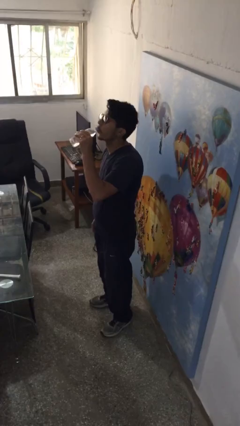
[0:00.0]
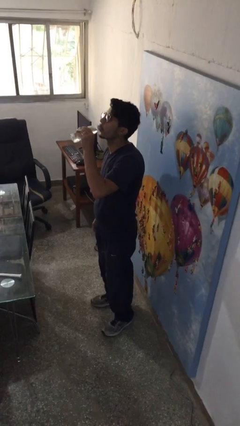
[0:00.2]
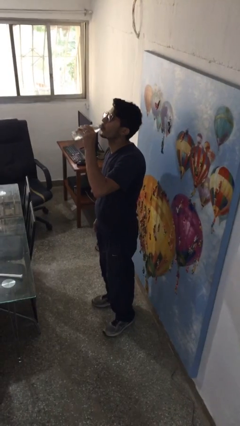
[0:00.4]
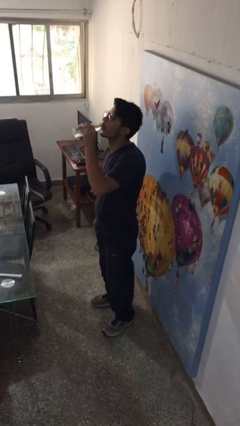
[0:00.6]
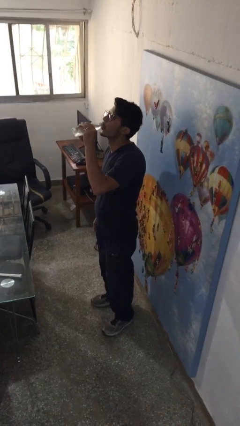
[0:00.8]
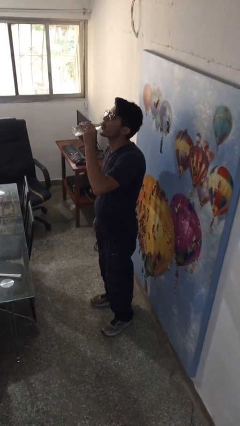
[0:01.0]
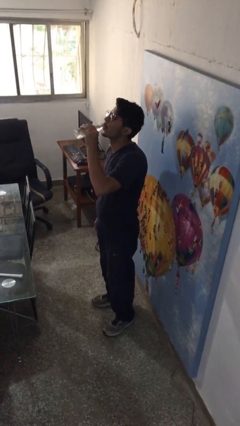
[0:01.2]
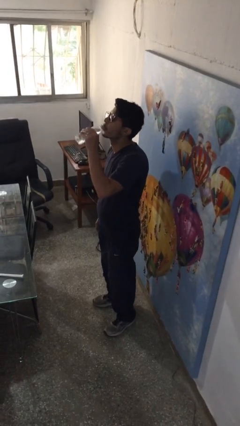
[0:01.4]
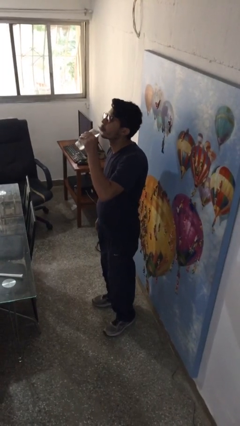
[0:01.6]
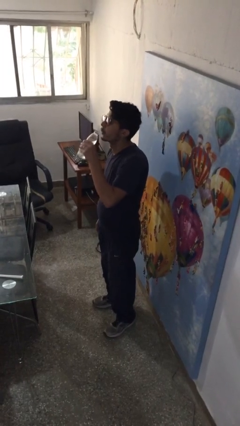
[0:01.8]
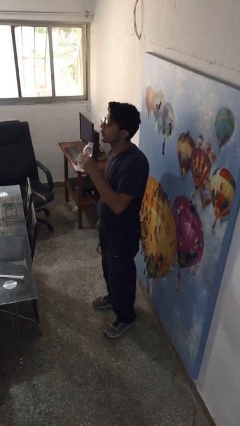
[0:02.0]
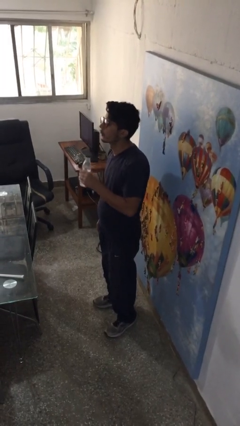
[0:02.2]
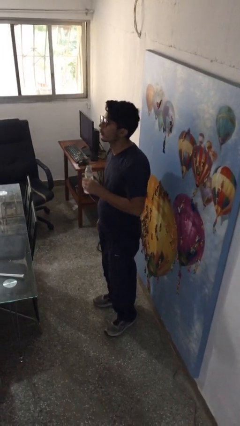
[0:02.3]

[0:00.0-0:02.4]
person drinks from bottle

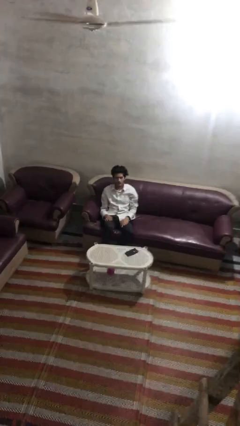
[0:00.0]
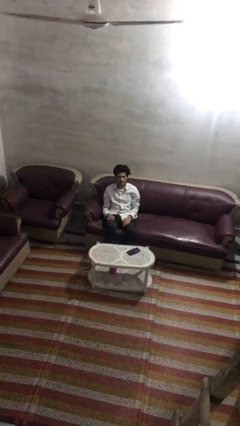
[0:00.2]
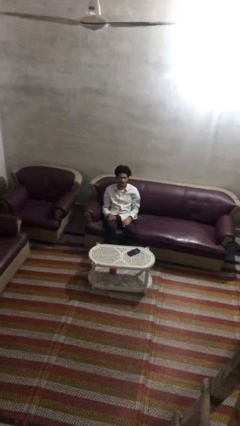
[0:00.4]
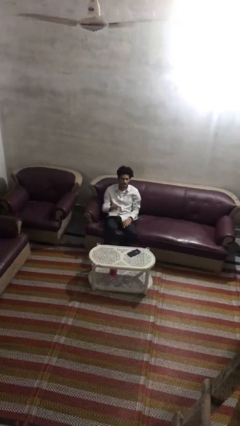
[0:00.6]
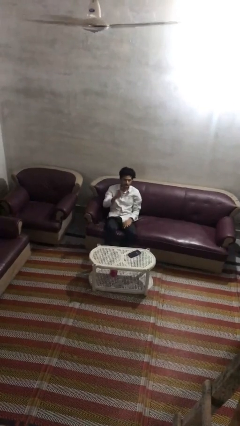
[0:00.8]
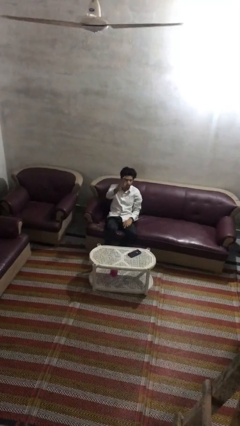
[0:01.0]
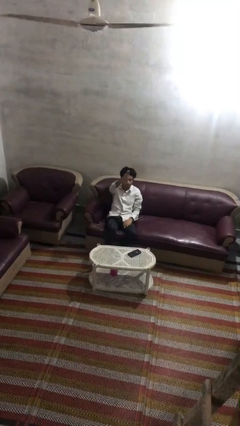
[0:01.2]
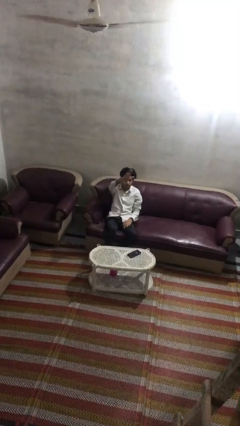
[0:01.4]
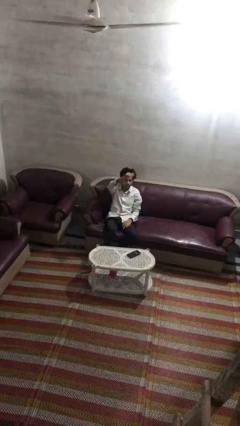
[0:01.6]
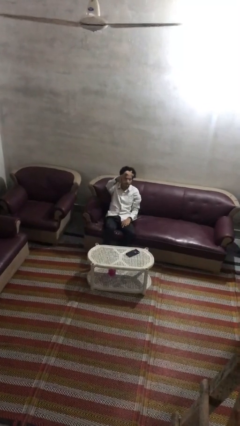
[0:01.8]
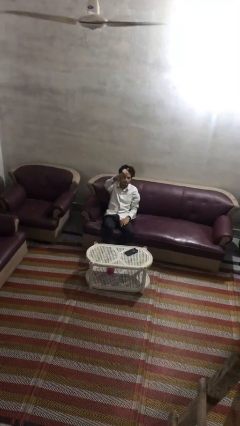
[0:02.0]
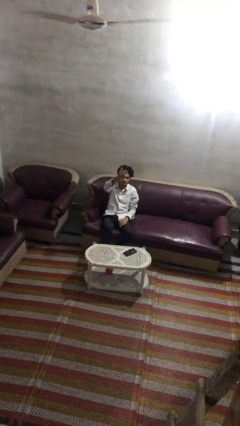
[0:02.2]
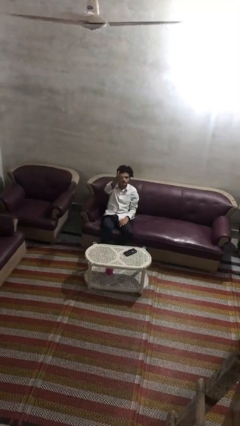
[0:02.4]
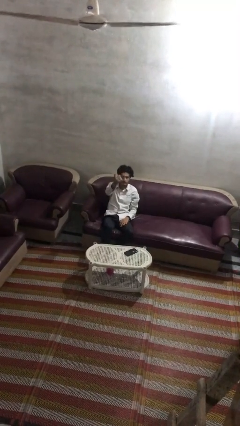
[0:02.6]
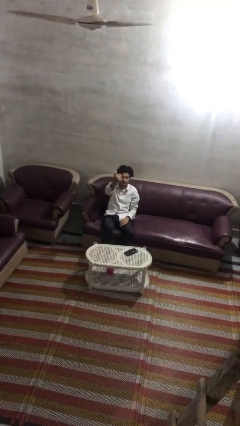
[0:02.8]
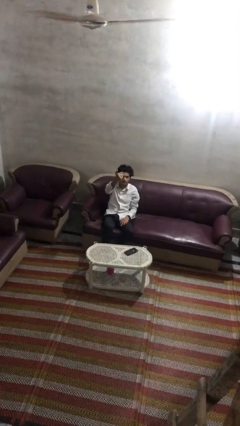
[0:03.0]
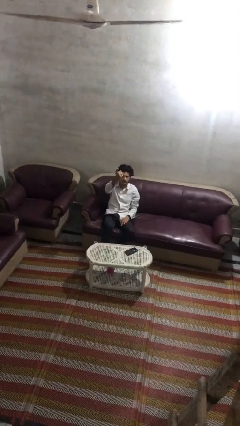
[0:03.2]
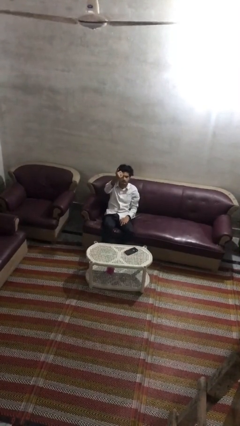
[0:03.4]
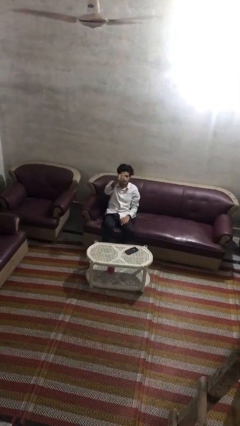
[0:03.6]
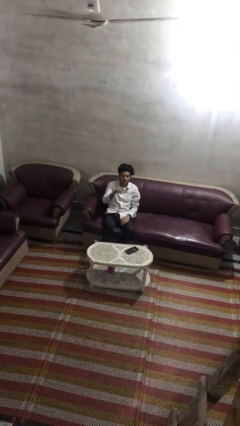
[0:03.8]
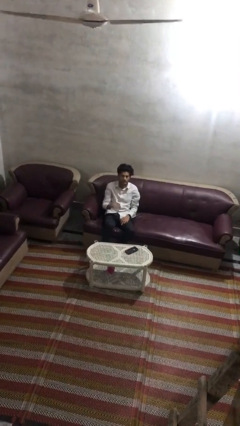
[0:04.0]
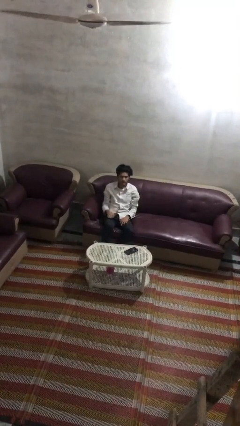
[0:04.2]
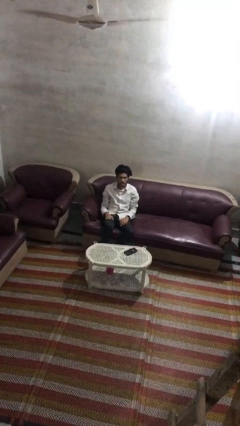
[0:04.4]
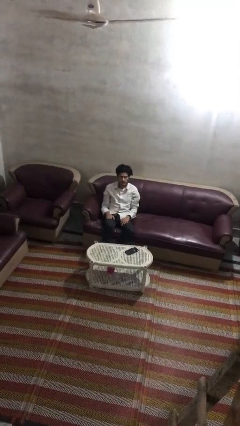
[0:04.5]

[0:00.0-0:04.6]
person gestures come here

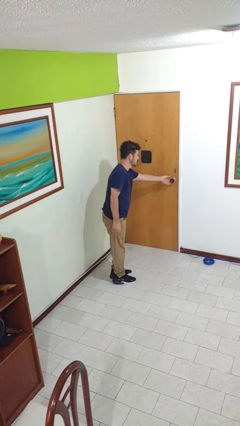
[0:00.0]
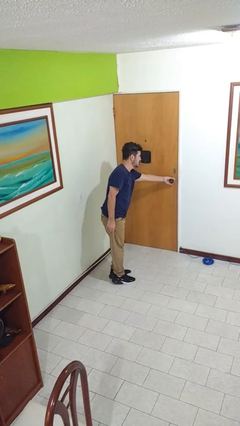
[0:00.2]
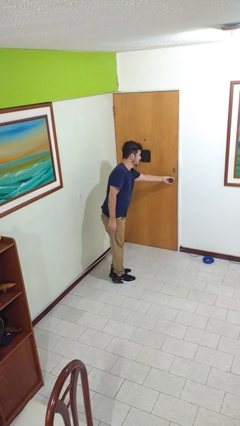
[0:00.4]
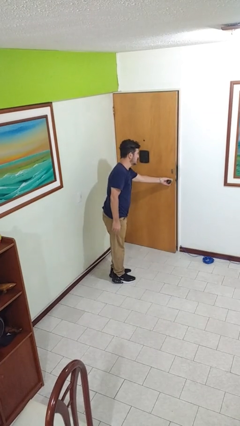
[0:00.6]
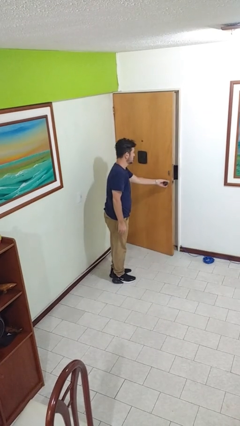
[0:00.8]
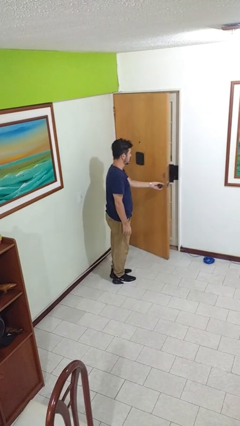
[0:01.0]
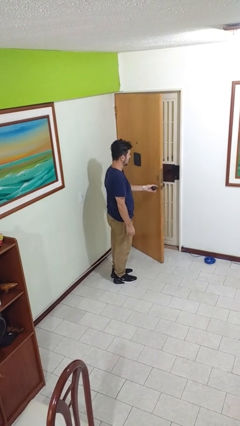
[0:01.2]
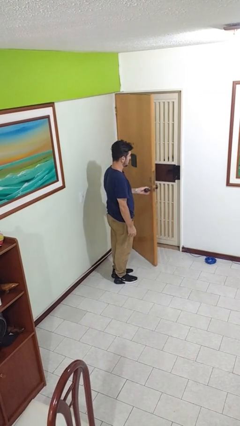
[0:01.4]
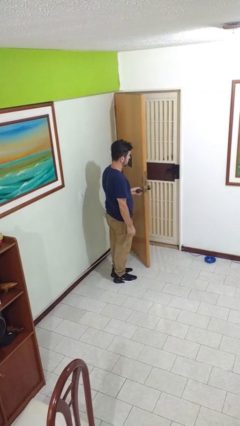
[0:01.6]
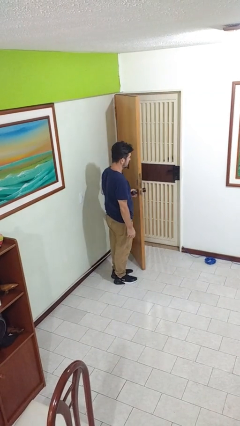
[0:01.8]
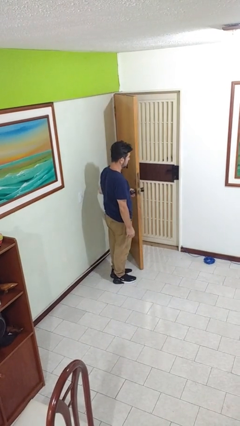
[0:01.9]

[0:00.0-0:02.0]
person opens facility door

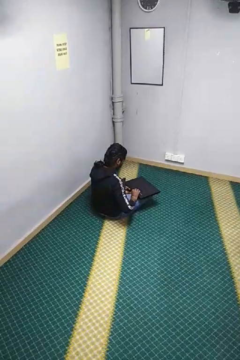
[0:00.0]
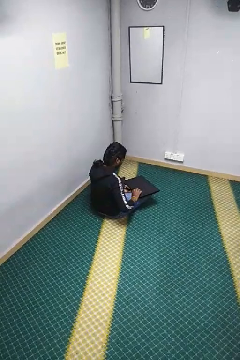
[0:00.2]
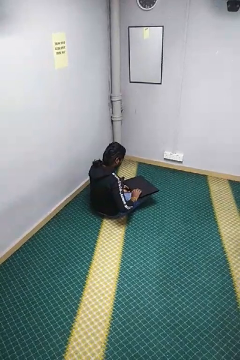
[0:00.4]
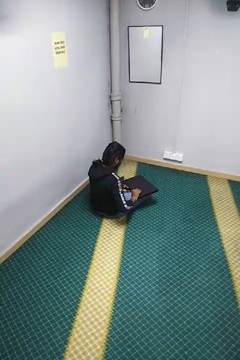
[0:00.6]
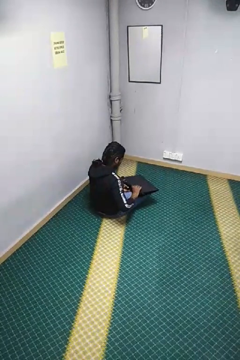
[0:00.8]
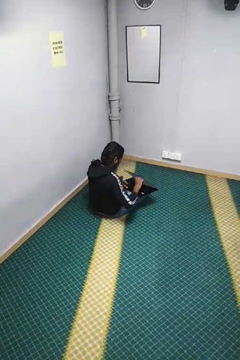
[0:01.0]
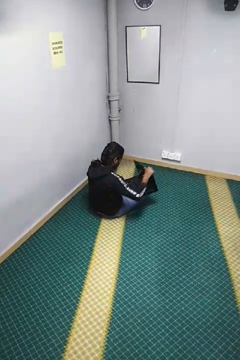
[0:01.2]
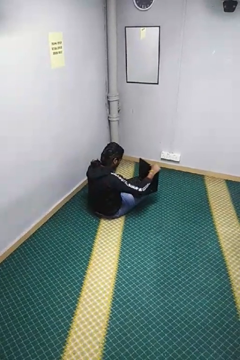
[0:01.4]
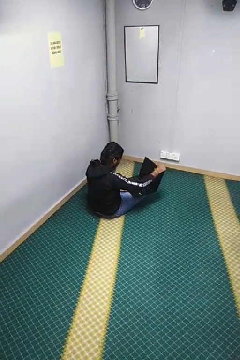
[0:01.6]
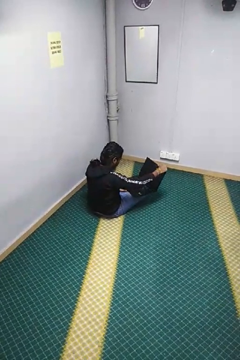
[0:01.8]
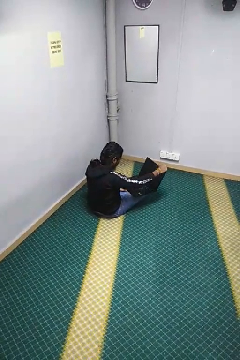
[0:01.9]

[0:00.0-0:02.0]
person opens laptop

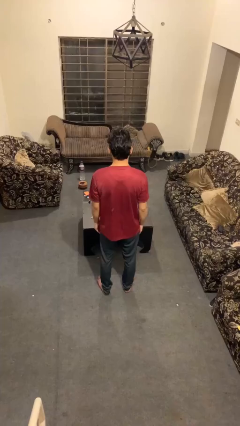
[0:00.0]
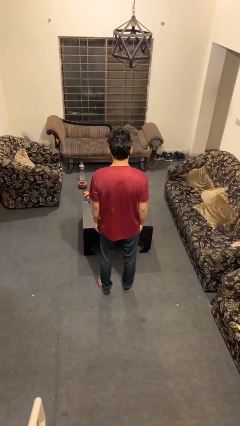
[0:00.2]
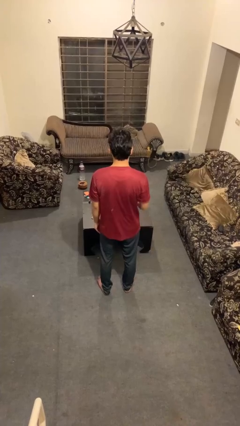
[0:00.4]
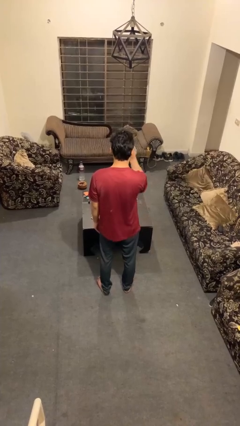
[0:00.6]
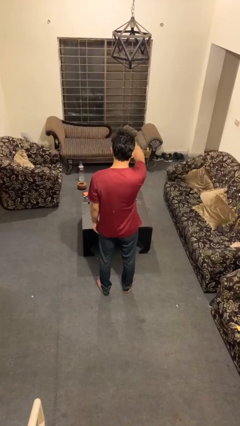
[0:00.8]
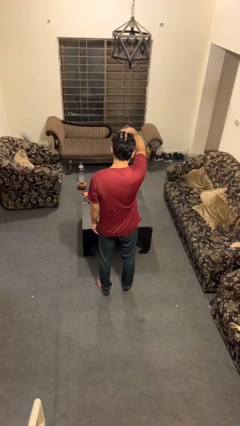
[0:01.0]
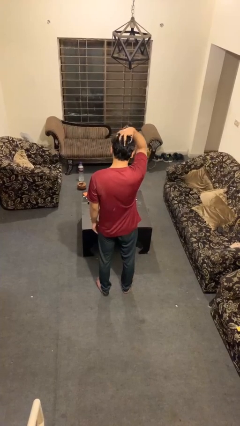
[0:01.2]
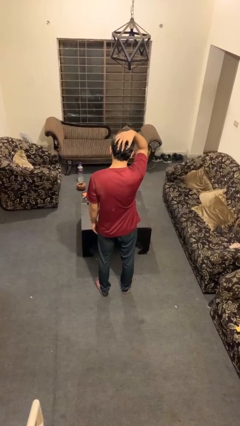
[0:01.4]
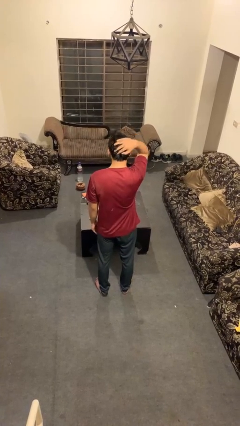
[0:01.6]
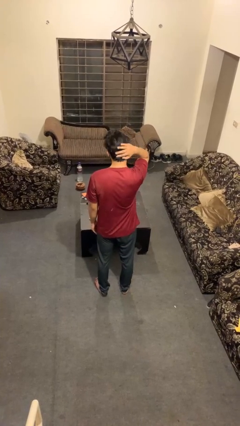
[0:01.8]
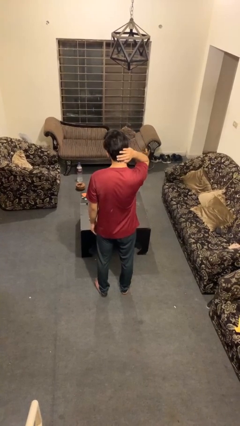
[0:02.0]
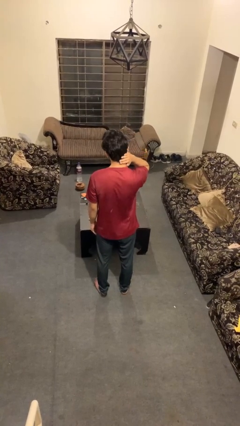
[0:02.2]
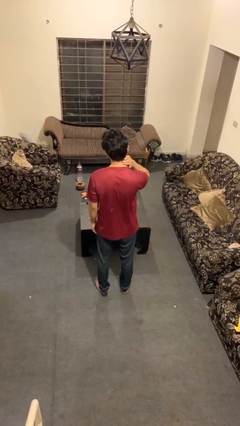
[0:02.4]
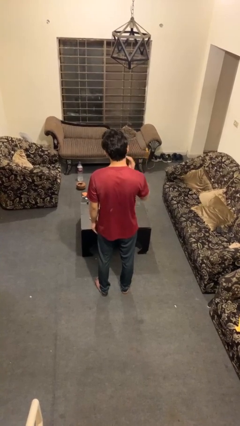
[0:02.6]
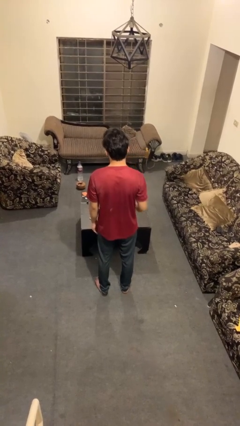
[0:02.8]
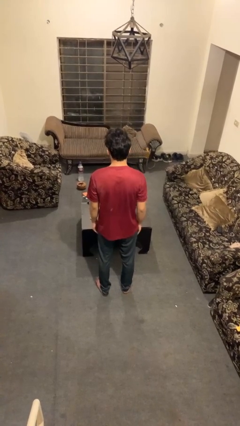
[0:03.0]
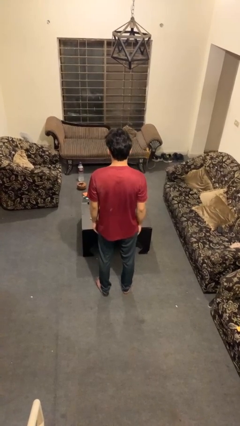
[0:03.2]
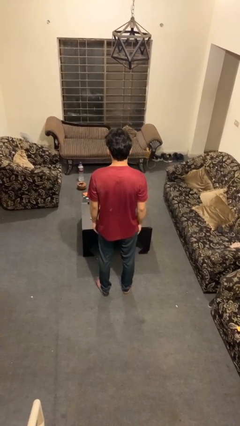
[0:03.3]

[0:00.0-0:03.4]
person strokes hair

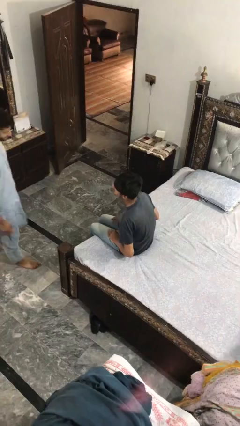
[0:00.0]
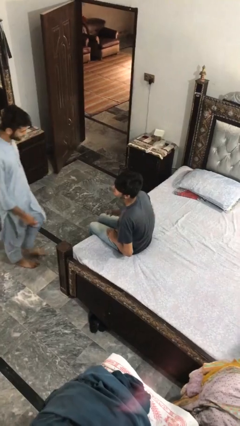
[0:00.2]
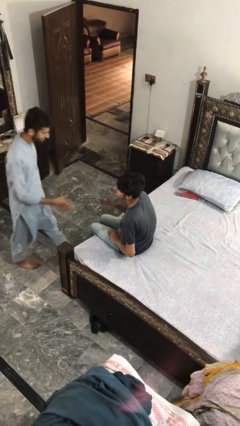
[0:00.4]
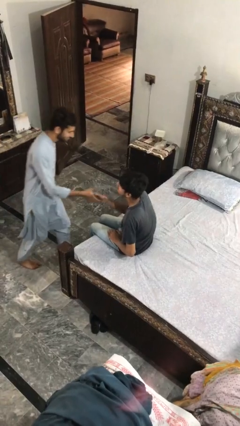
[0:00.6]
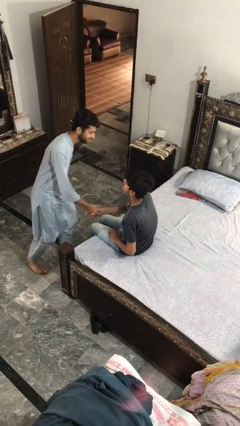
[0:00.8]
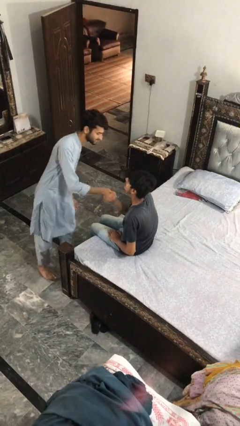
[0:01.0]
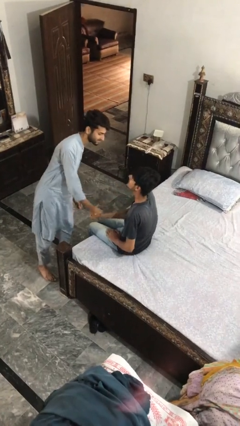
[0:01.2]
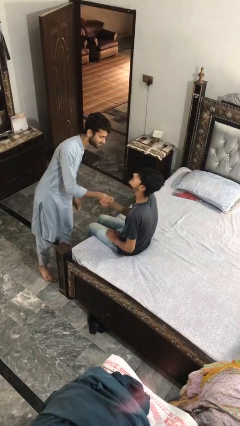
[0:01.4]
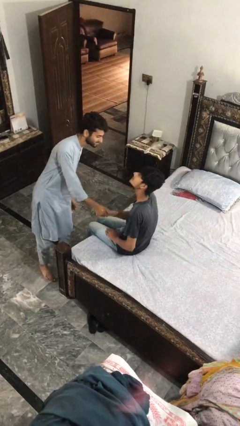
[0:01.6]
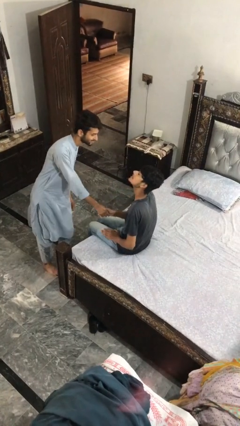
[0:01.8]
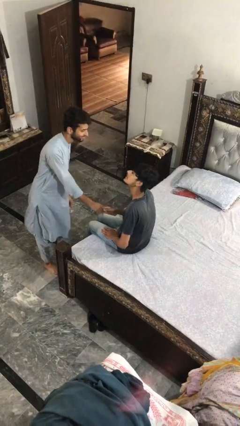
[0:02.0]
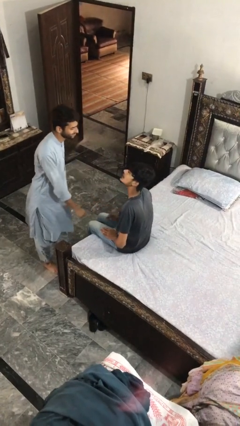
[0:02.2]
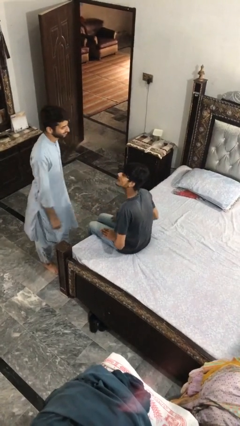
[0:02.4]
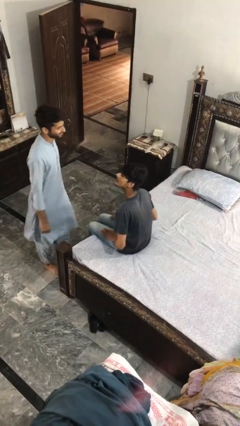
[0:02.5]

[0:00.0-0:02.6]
person shakes hand

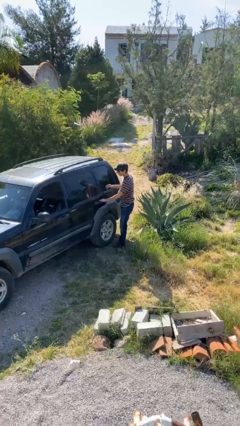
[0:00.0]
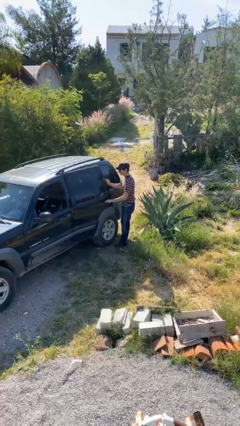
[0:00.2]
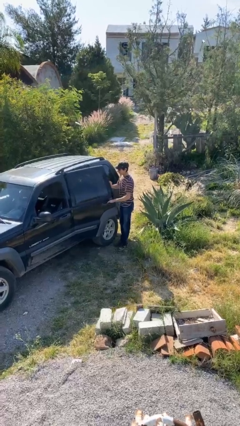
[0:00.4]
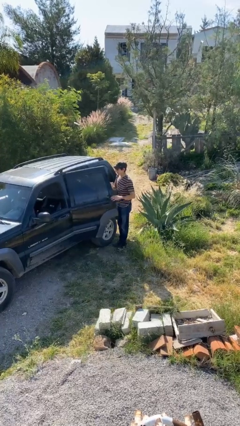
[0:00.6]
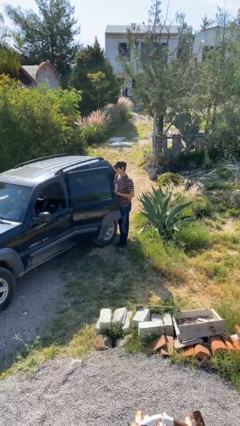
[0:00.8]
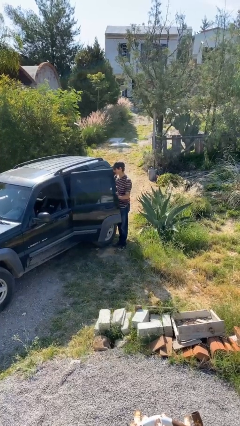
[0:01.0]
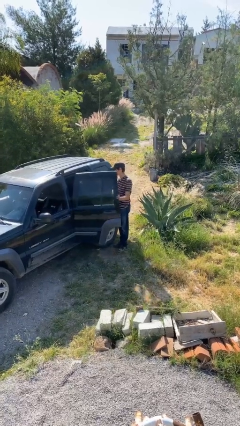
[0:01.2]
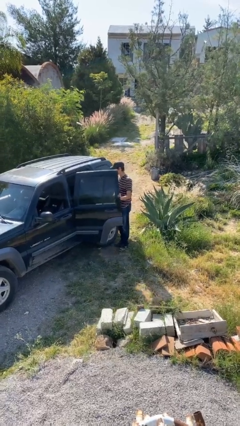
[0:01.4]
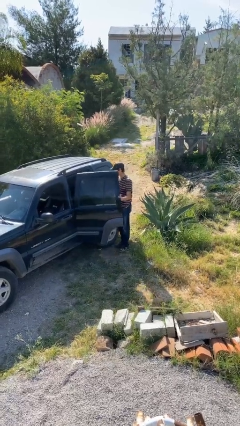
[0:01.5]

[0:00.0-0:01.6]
person opens car door
